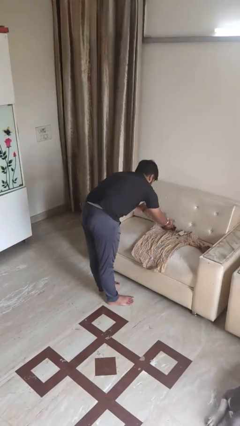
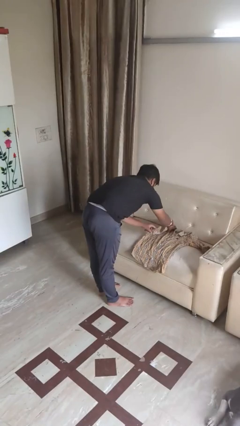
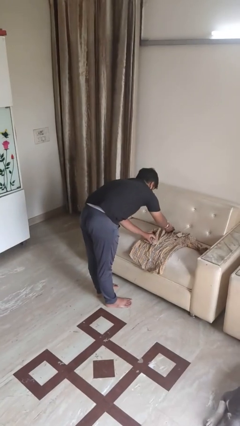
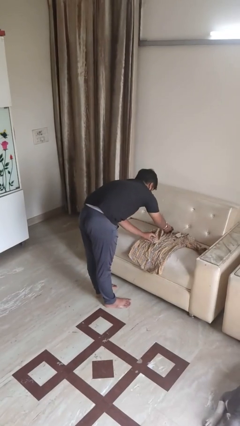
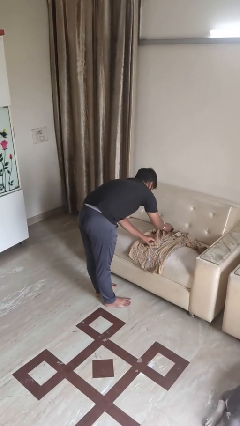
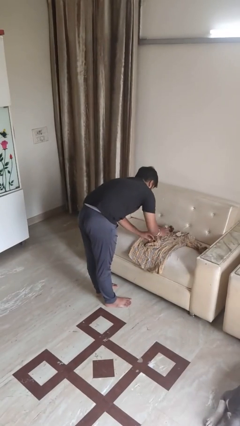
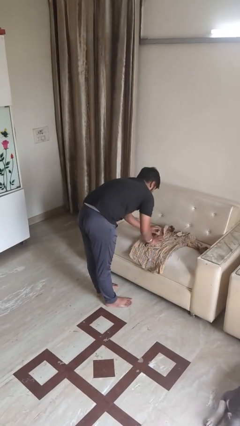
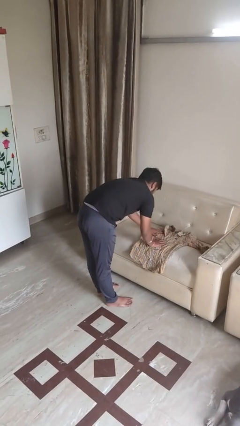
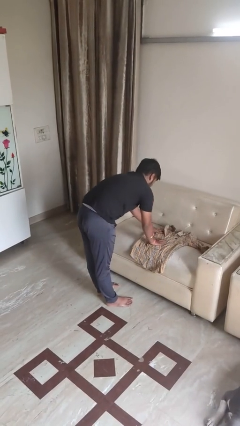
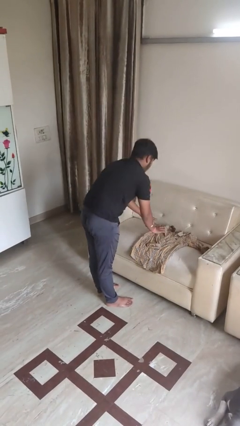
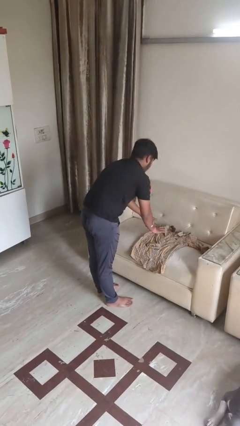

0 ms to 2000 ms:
person folds shirt

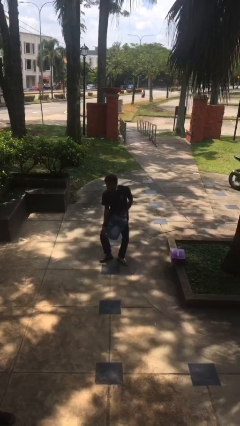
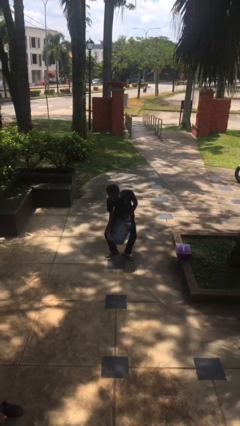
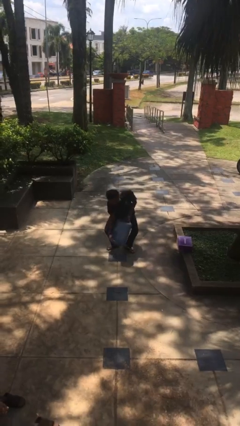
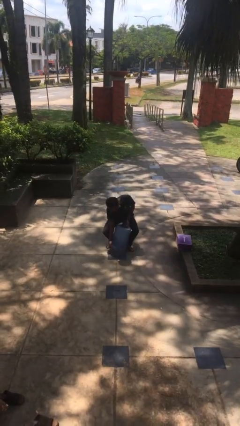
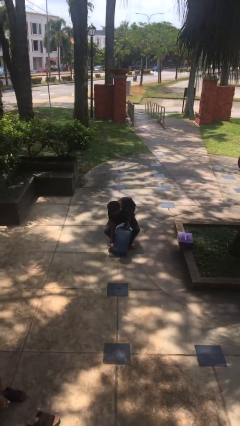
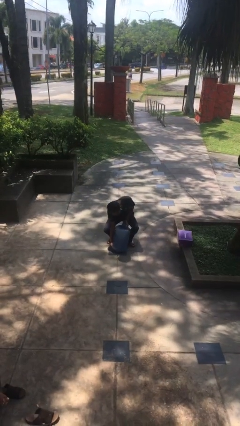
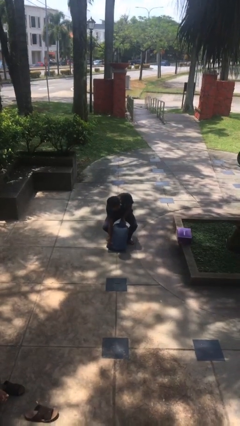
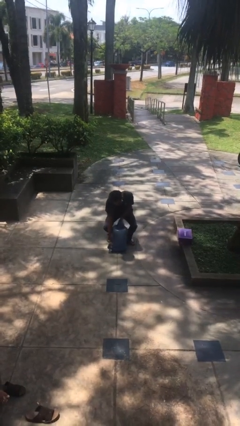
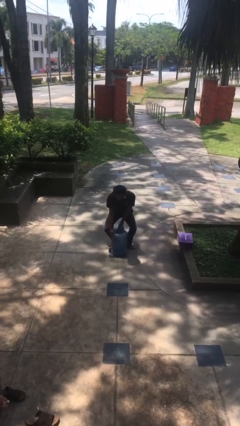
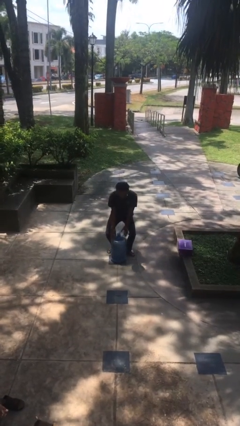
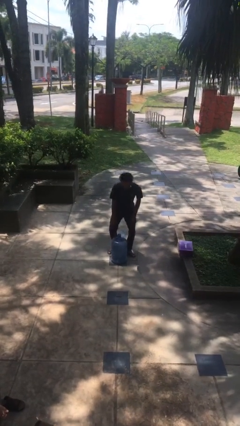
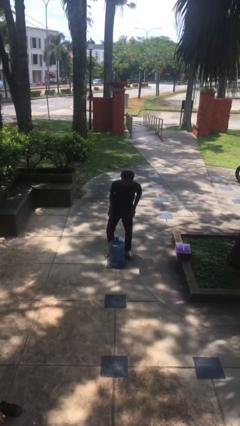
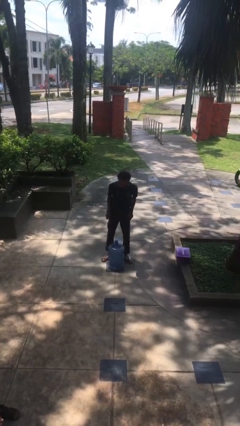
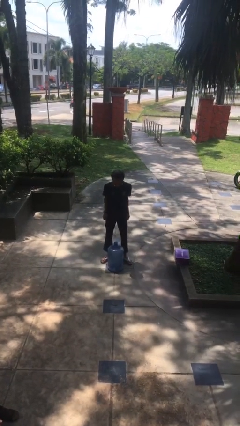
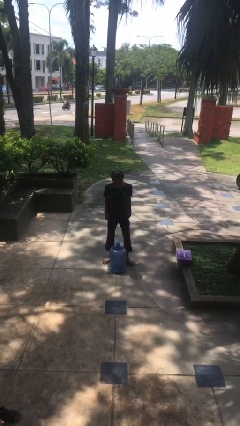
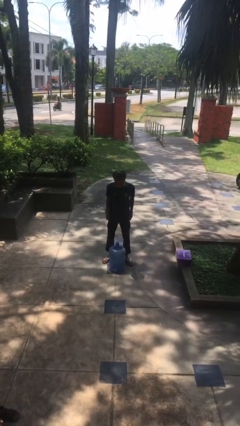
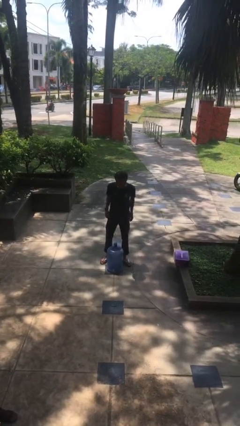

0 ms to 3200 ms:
person puts down object on floor

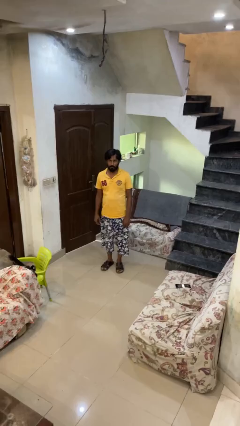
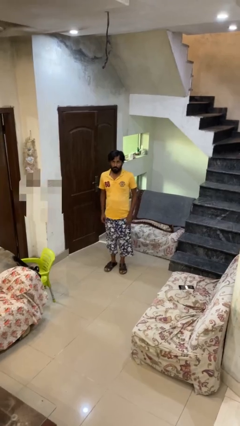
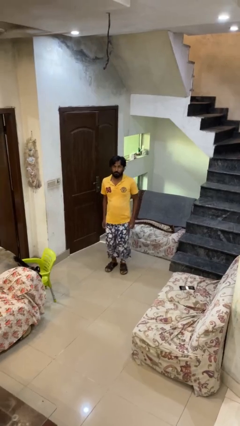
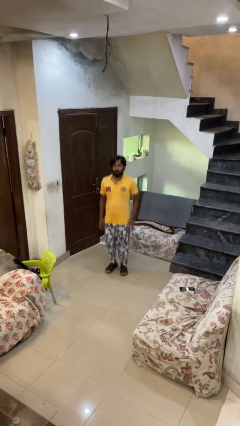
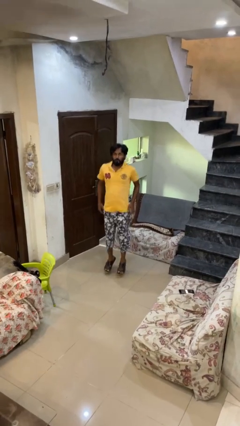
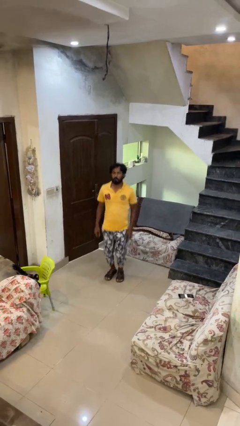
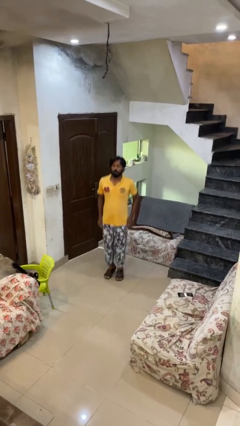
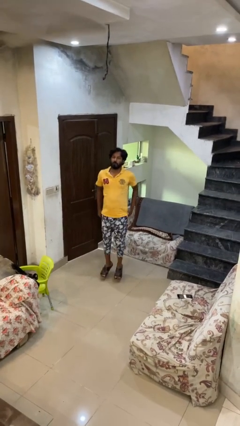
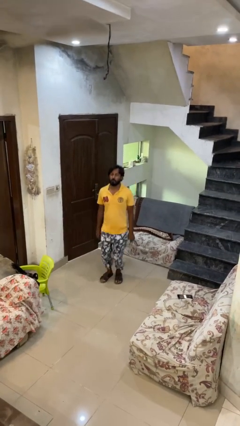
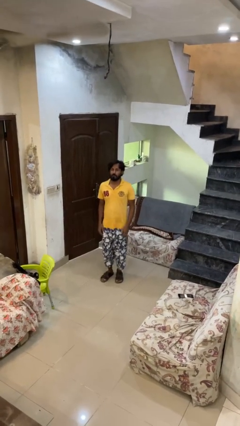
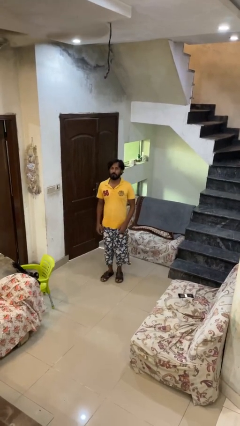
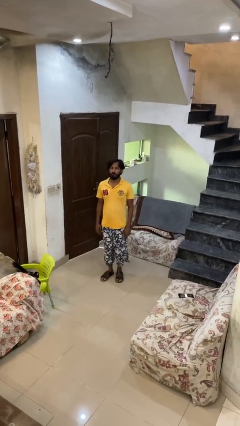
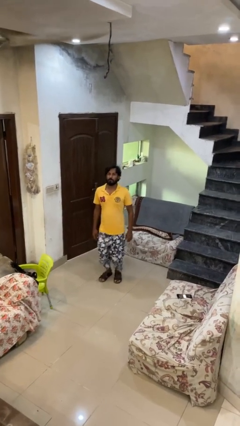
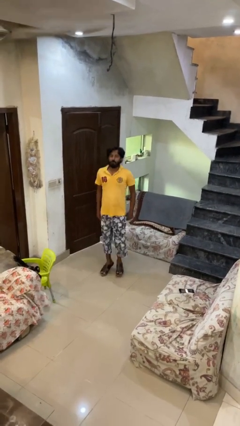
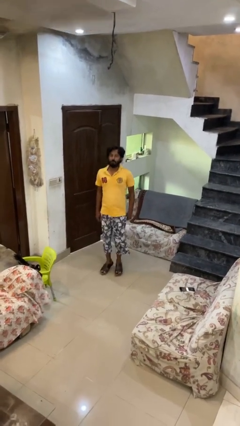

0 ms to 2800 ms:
person jumps

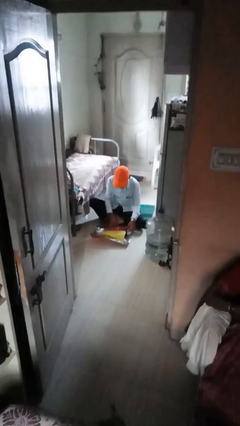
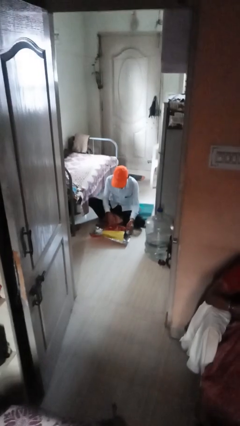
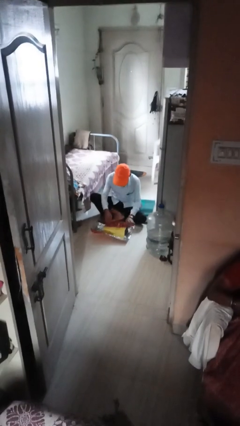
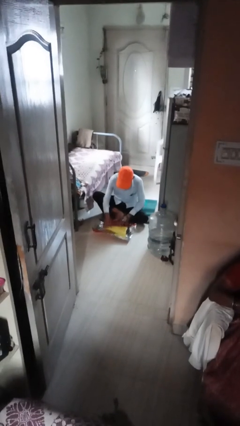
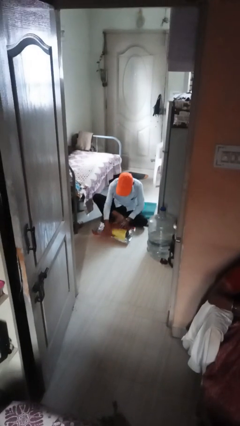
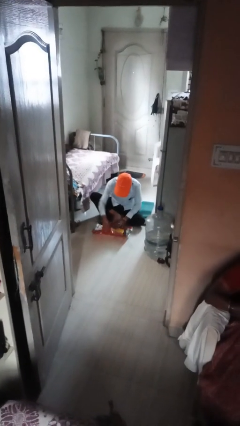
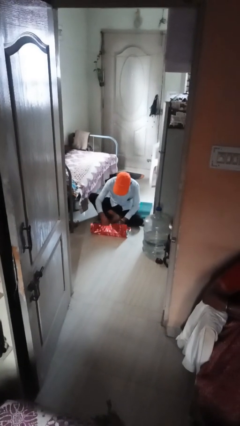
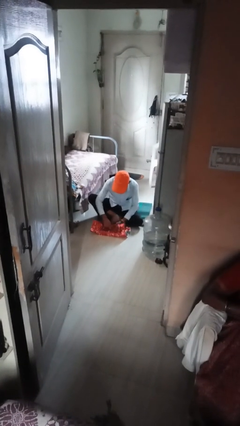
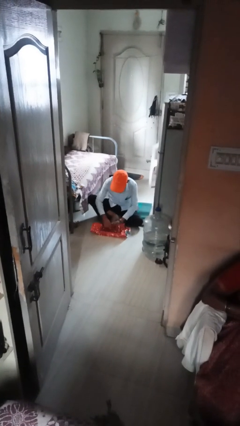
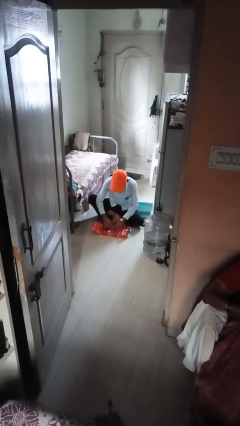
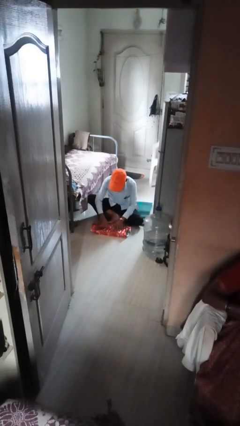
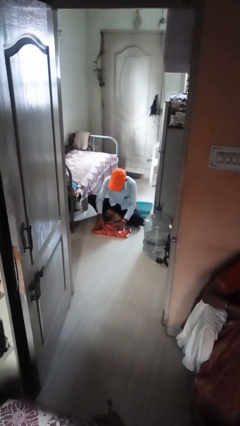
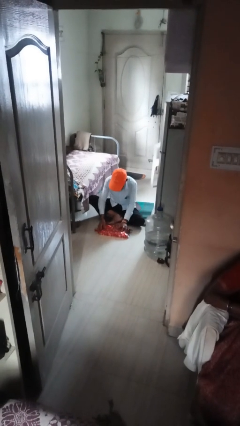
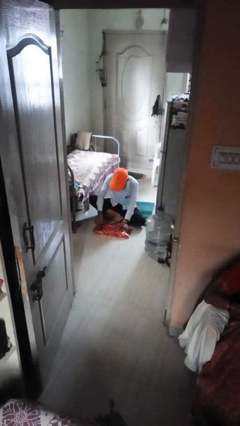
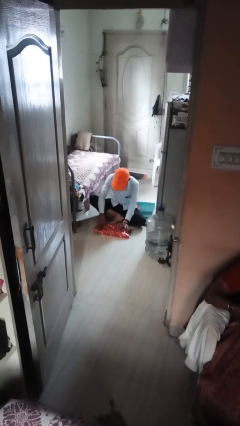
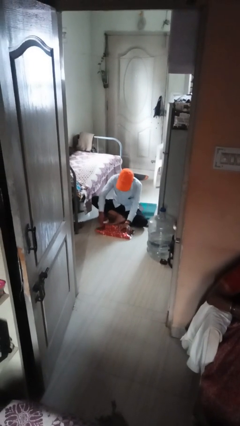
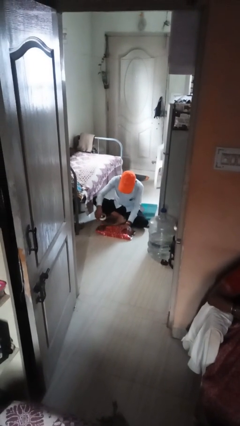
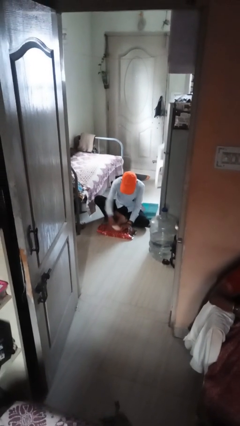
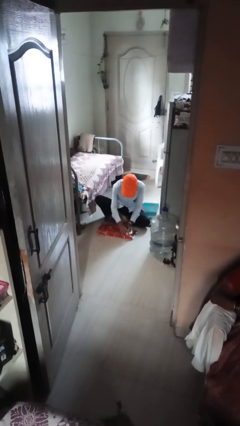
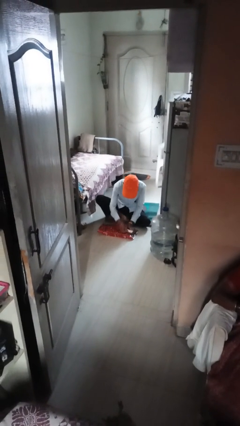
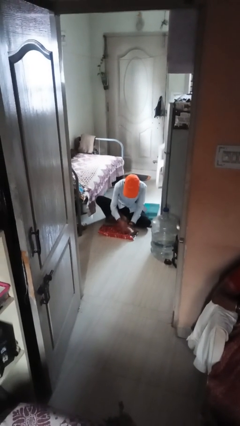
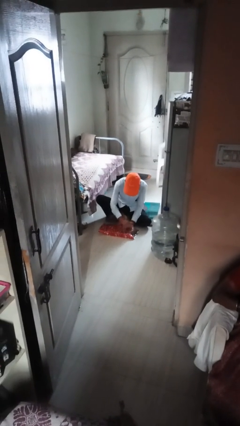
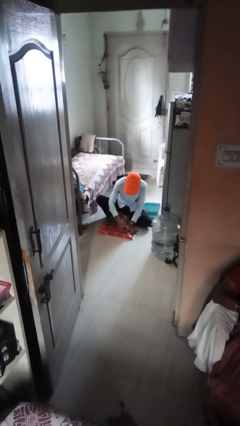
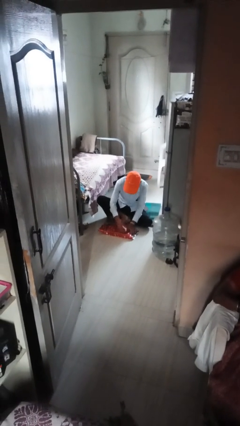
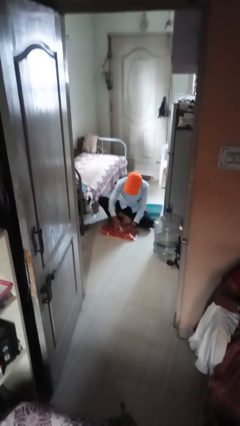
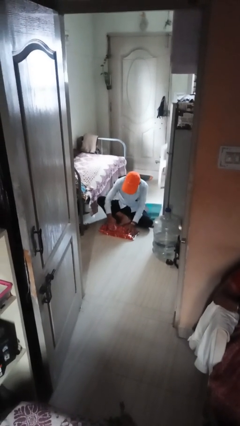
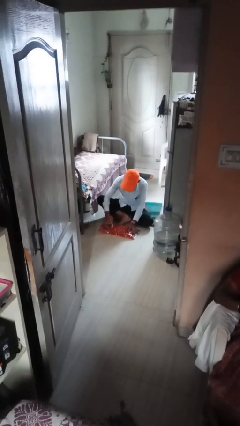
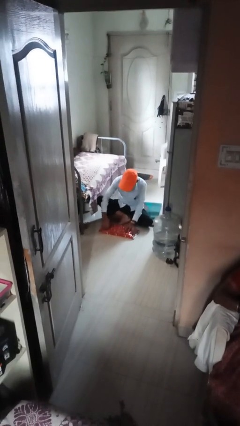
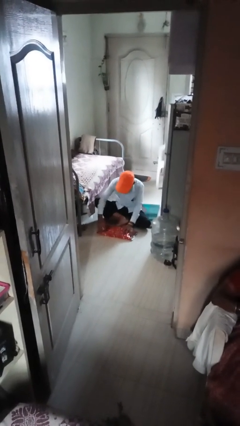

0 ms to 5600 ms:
person wraps box

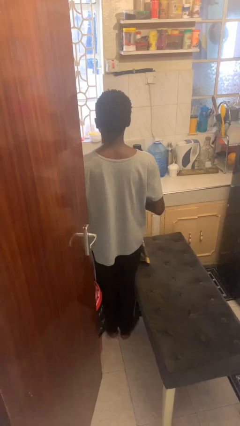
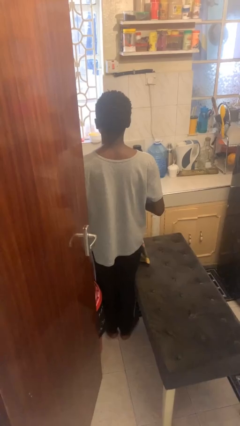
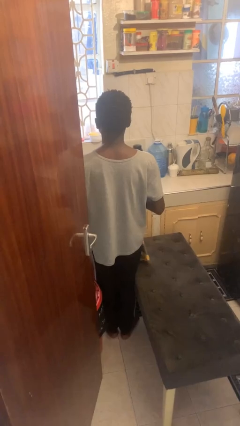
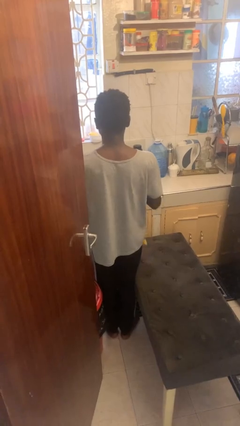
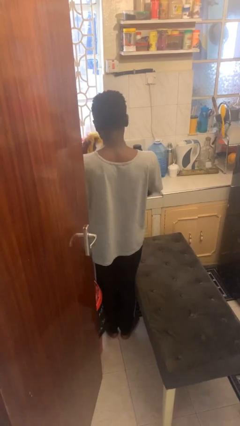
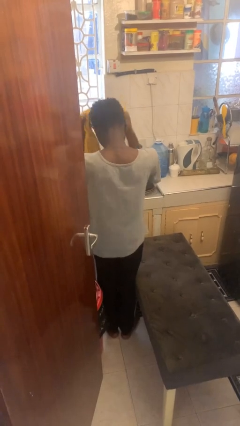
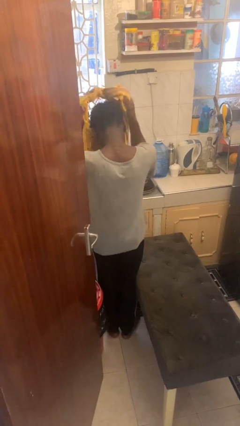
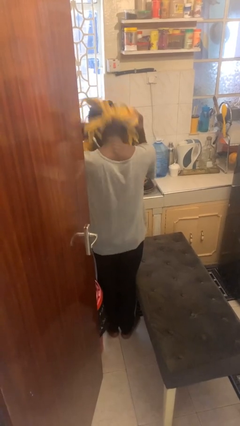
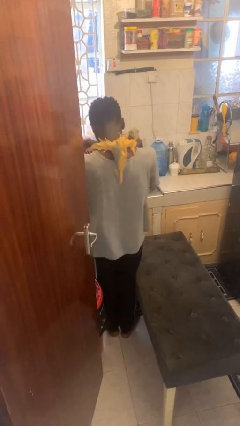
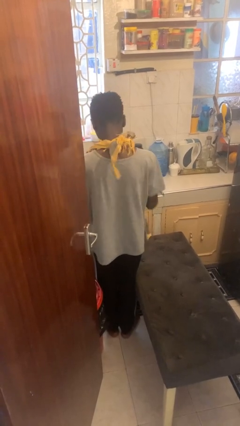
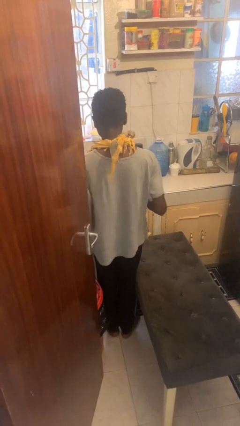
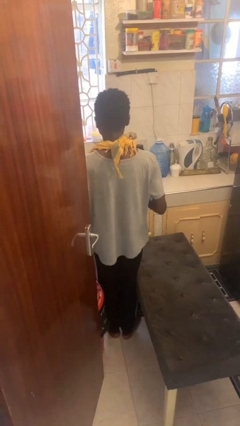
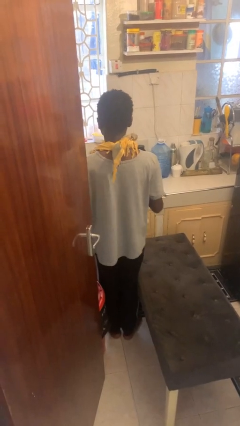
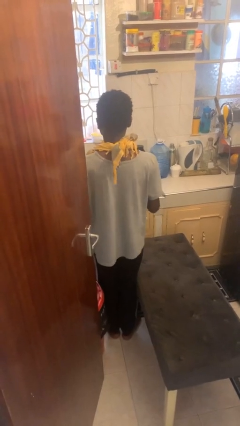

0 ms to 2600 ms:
person puts on apron

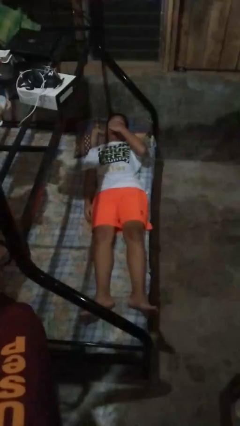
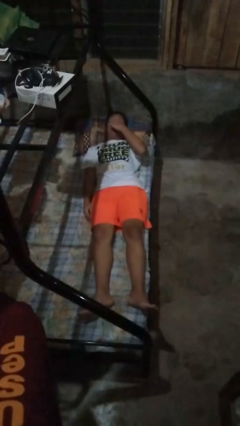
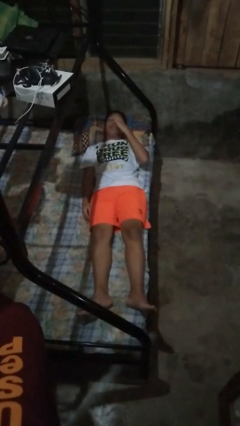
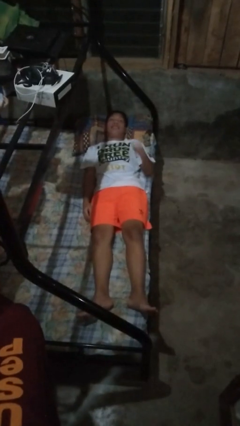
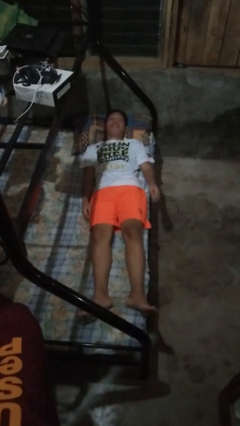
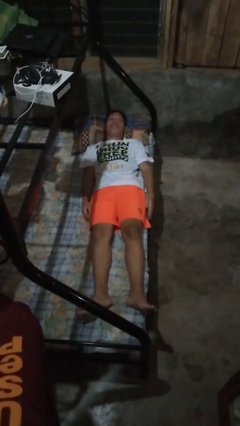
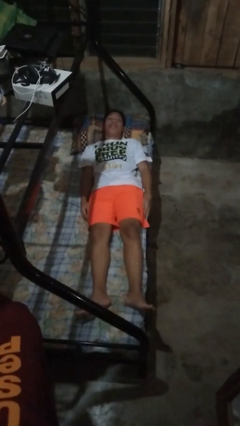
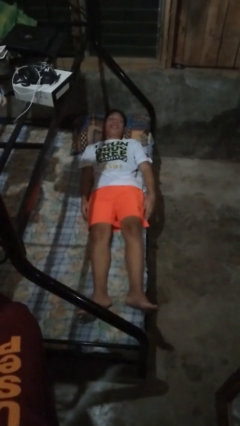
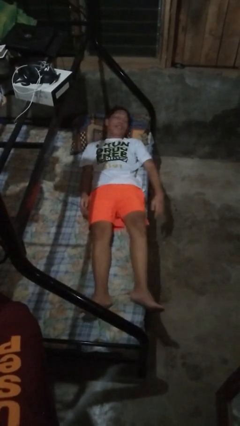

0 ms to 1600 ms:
person lies down on bed
